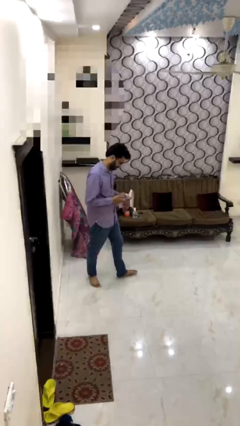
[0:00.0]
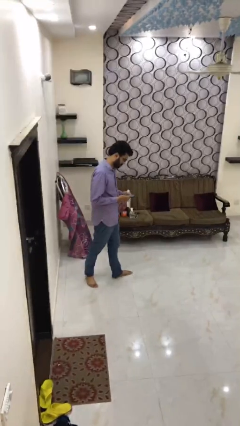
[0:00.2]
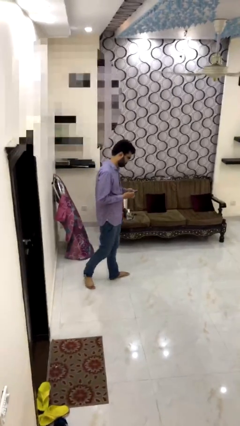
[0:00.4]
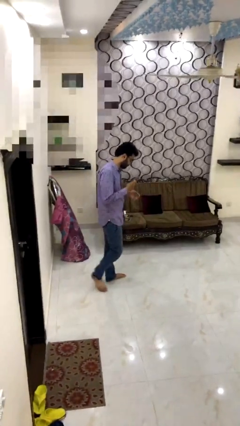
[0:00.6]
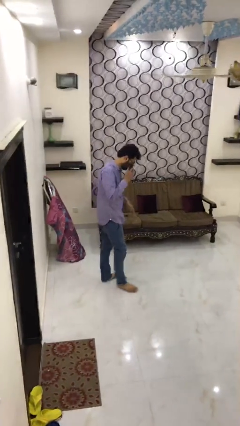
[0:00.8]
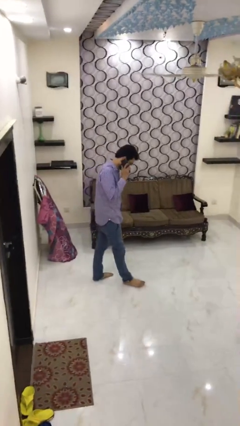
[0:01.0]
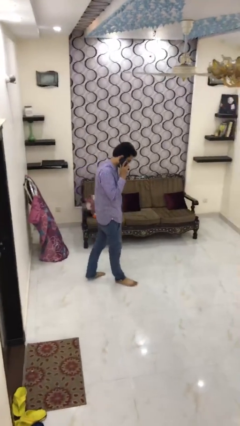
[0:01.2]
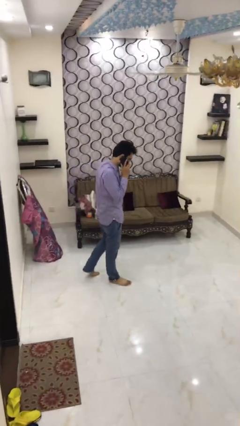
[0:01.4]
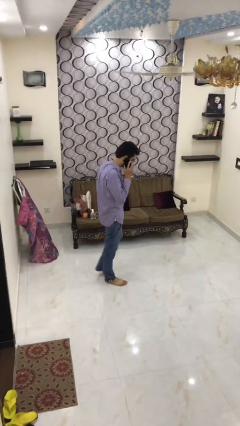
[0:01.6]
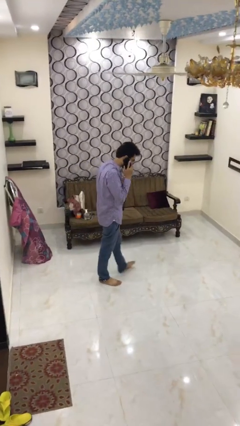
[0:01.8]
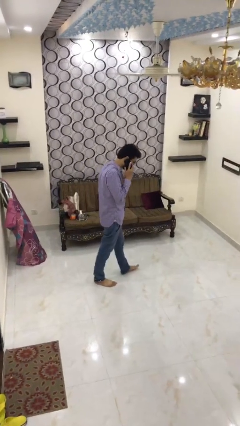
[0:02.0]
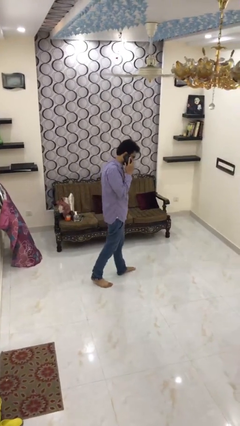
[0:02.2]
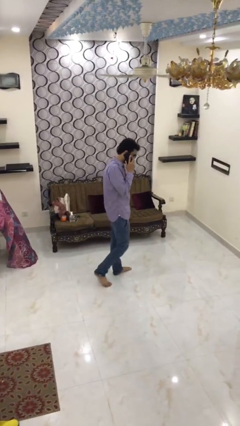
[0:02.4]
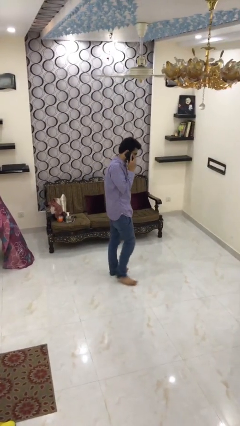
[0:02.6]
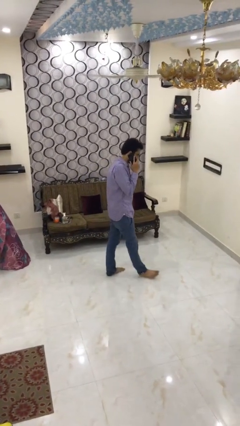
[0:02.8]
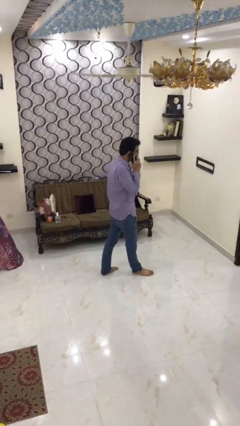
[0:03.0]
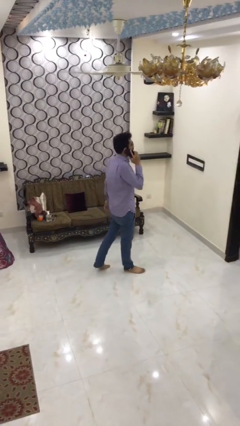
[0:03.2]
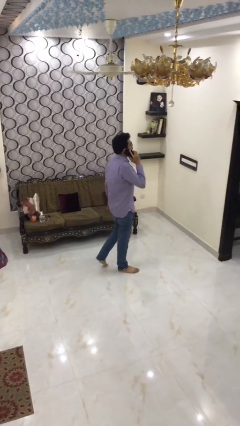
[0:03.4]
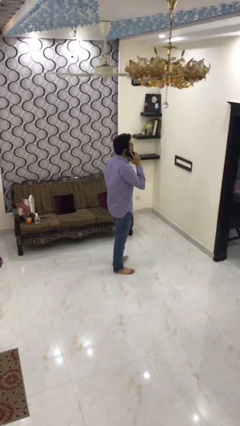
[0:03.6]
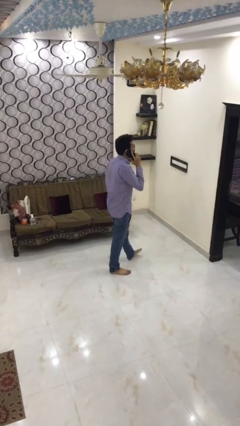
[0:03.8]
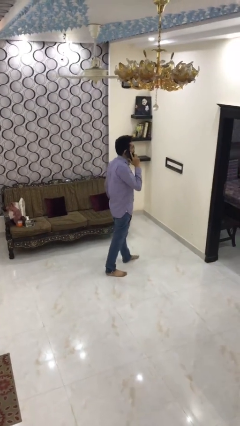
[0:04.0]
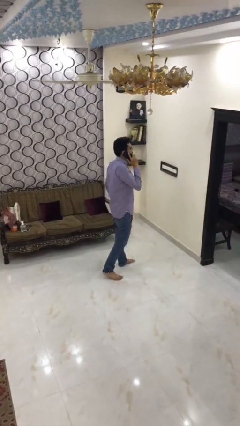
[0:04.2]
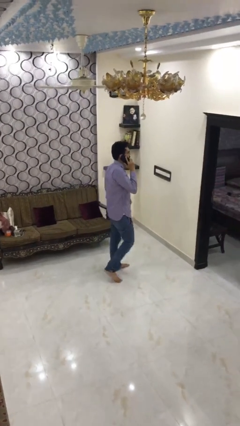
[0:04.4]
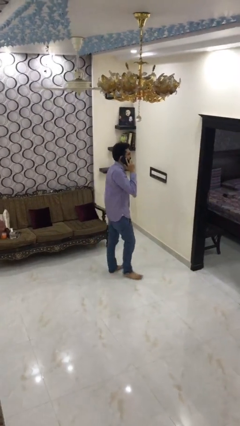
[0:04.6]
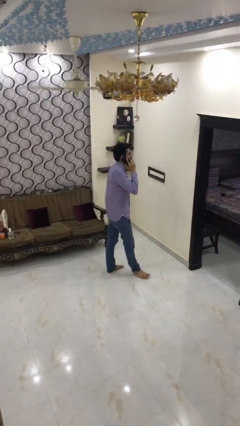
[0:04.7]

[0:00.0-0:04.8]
person talks on phone

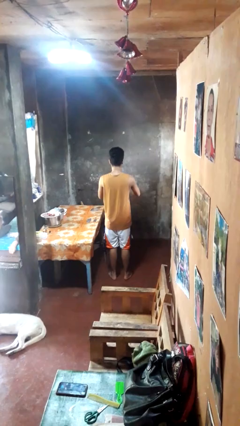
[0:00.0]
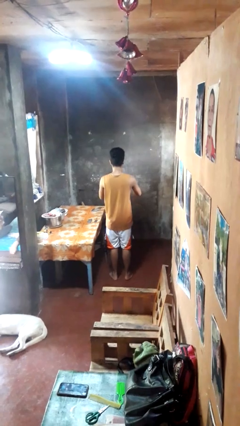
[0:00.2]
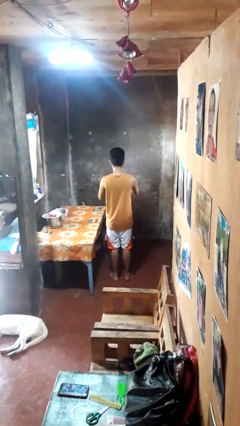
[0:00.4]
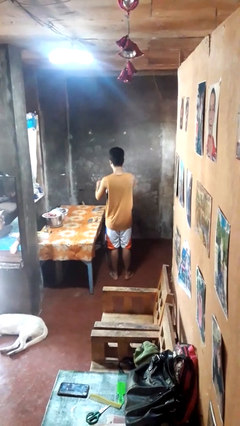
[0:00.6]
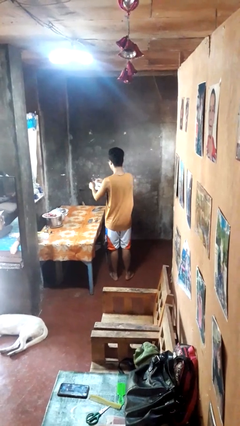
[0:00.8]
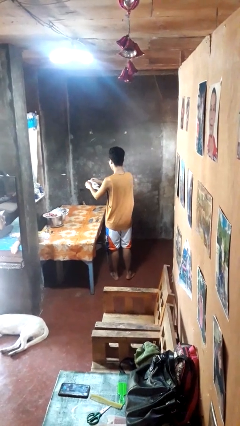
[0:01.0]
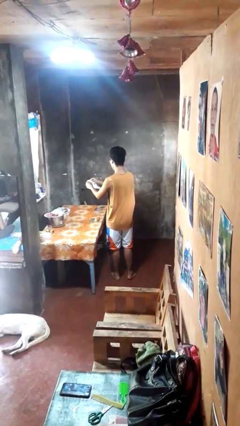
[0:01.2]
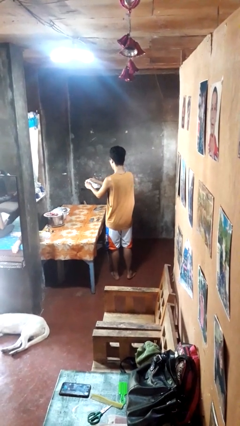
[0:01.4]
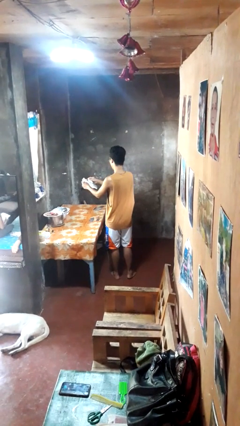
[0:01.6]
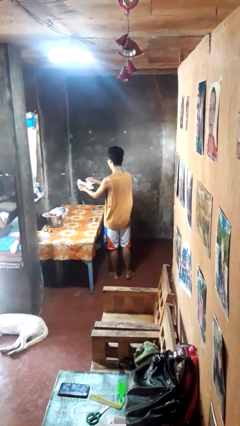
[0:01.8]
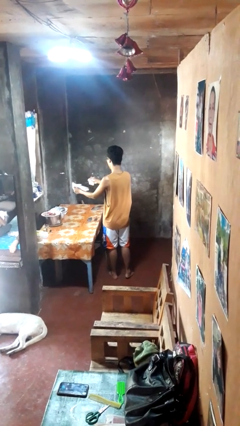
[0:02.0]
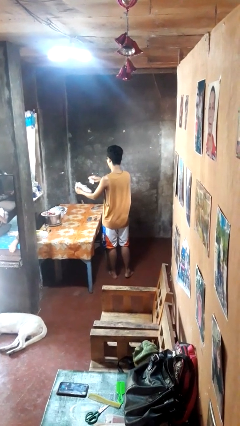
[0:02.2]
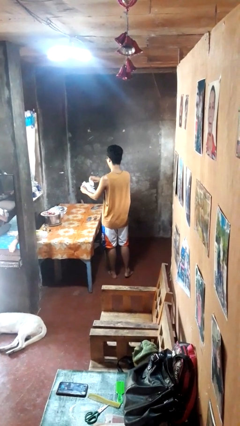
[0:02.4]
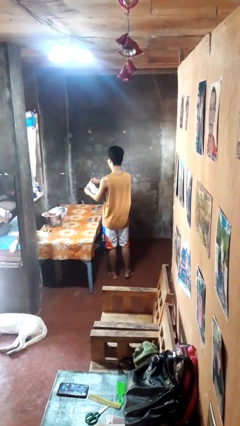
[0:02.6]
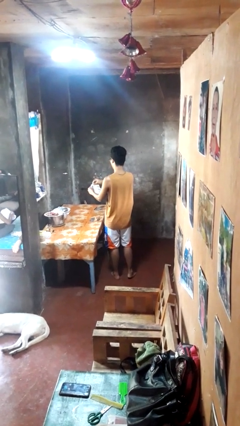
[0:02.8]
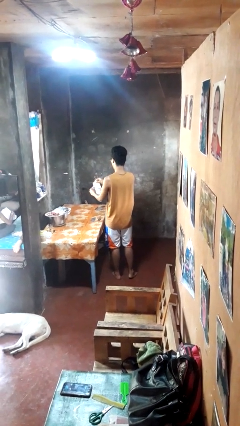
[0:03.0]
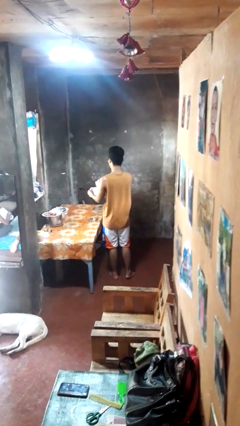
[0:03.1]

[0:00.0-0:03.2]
person tears paper

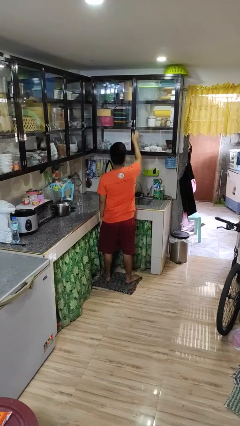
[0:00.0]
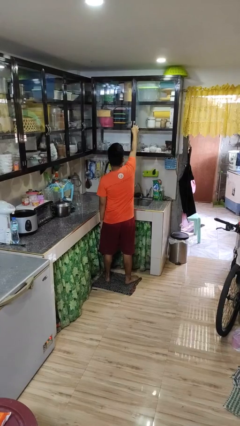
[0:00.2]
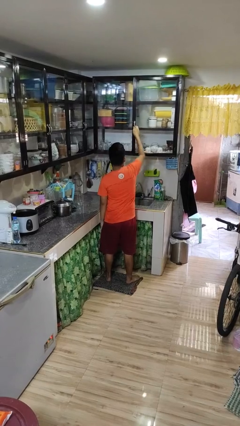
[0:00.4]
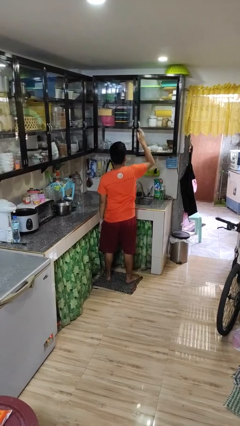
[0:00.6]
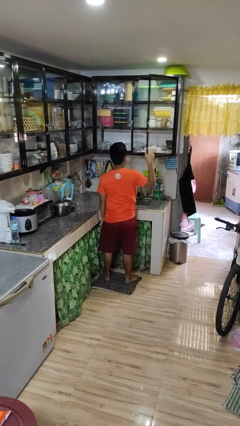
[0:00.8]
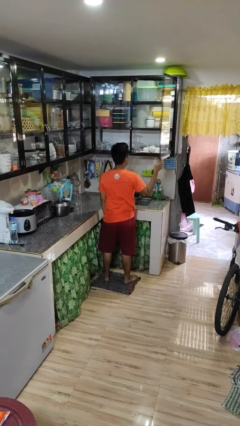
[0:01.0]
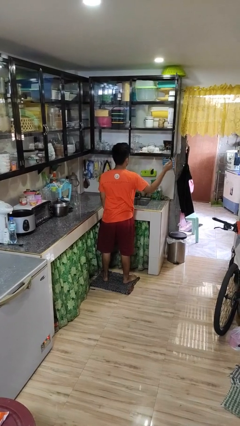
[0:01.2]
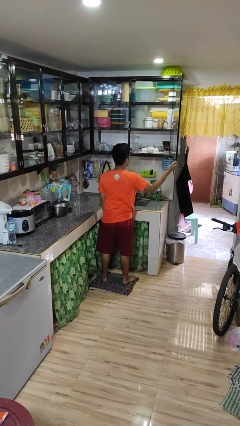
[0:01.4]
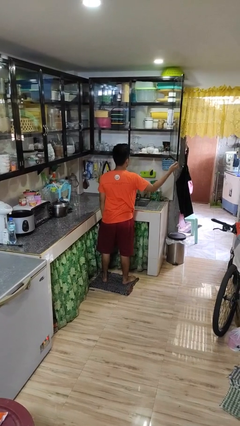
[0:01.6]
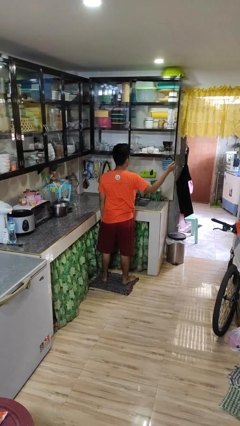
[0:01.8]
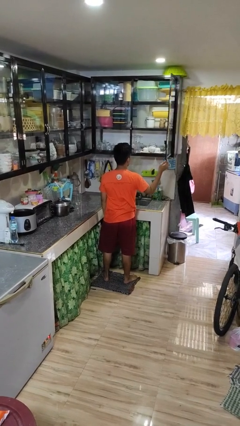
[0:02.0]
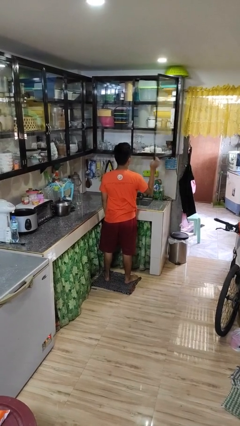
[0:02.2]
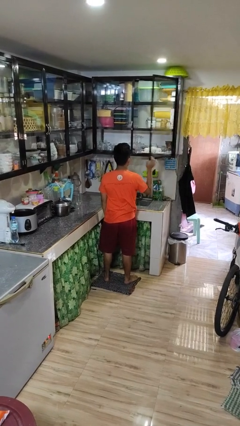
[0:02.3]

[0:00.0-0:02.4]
person opens cabinet

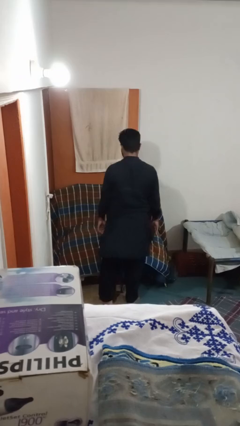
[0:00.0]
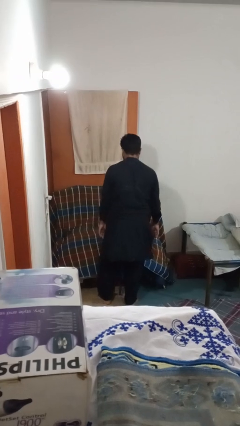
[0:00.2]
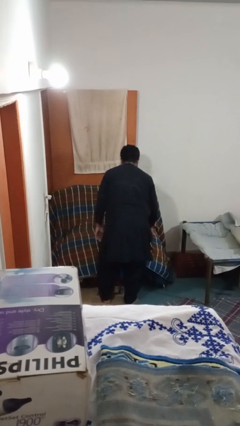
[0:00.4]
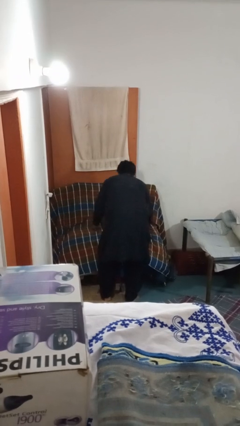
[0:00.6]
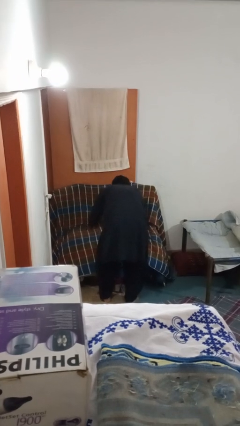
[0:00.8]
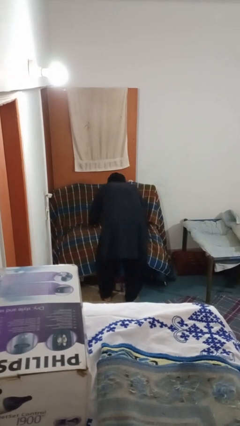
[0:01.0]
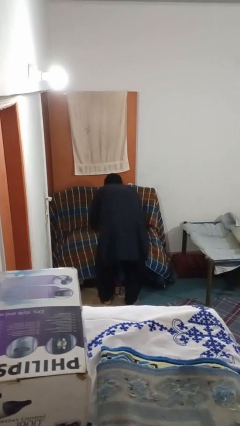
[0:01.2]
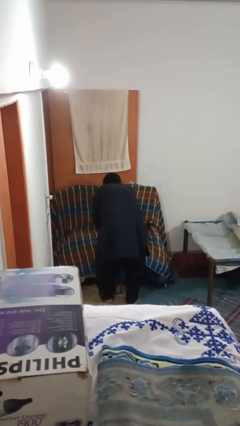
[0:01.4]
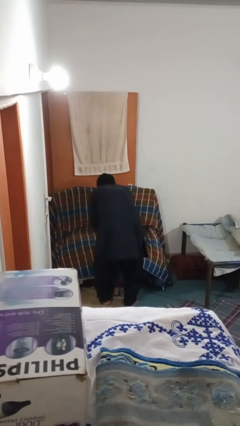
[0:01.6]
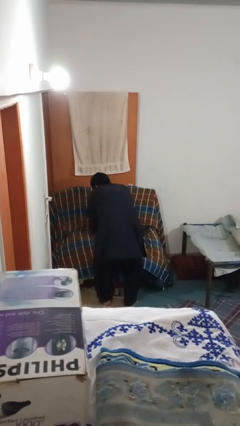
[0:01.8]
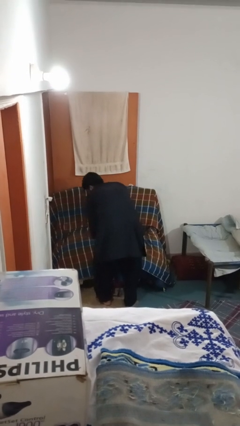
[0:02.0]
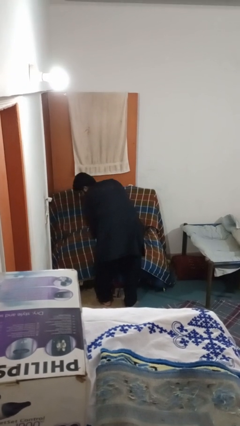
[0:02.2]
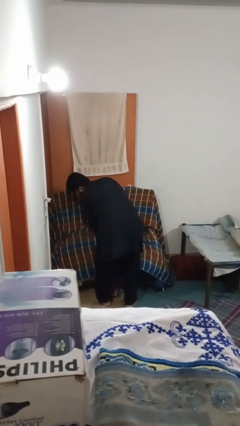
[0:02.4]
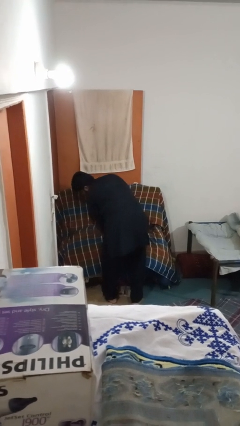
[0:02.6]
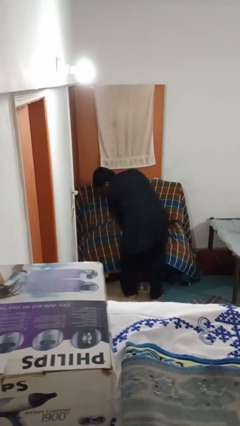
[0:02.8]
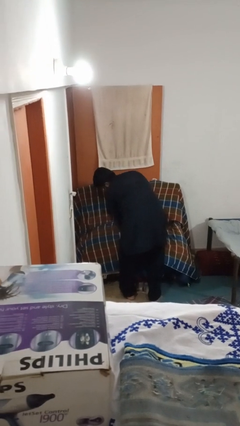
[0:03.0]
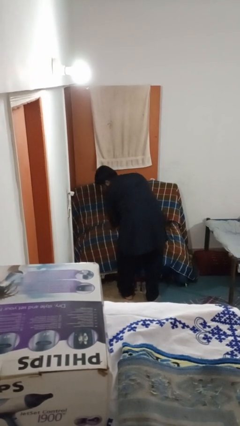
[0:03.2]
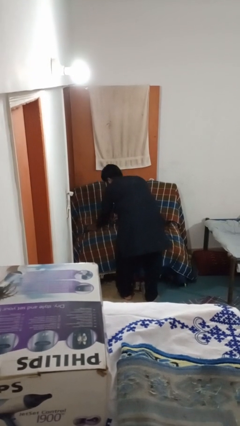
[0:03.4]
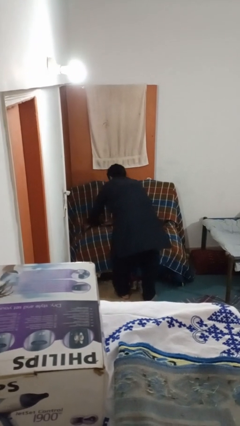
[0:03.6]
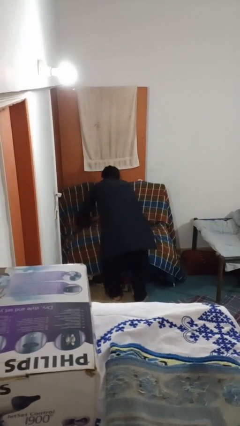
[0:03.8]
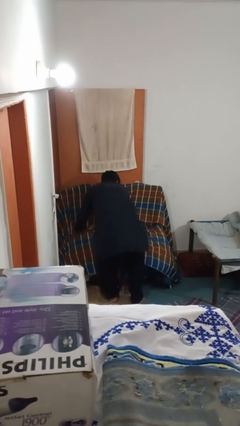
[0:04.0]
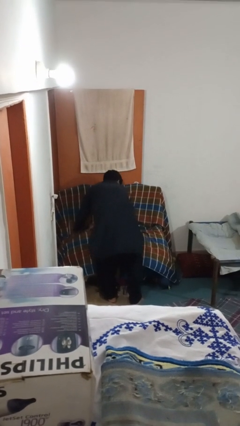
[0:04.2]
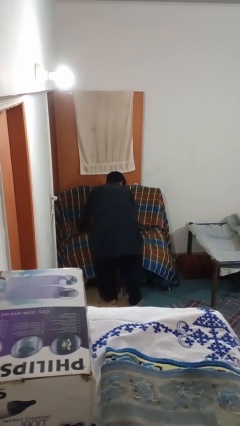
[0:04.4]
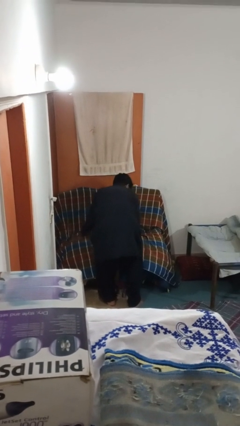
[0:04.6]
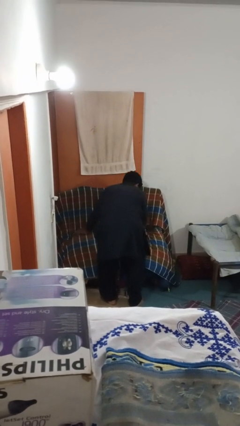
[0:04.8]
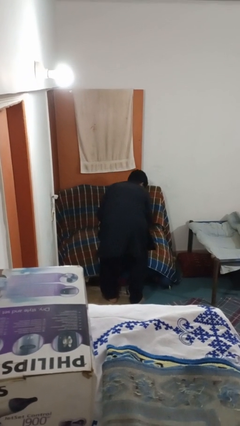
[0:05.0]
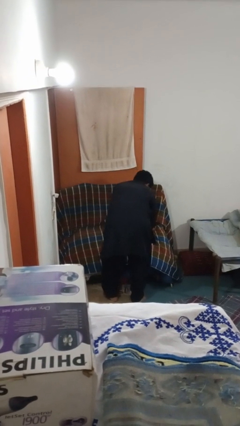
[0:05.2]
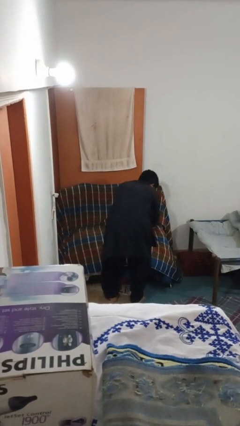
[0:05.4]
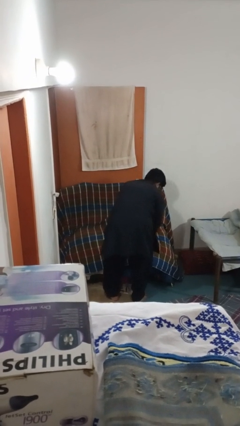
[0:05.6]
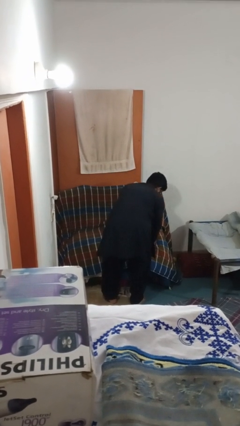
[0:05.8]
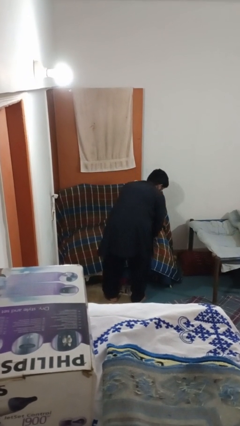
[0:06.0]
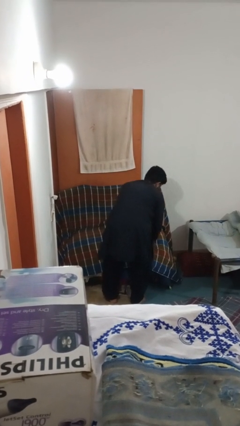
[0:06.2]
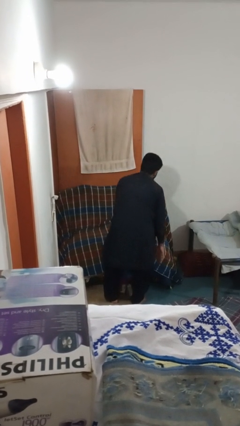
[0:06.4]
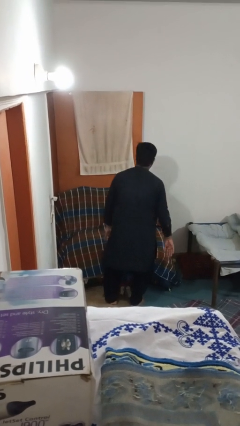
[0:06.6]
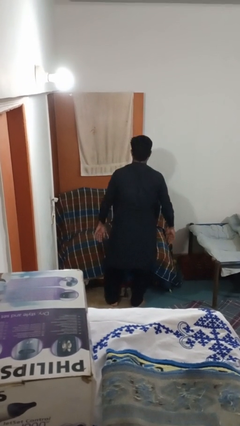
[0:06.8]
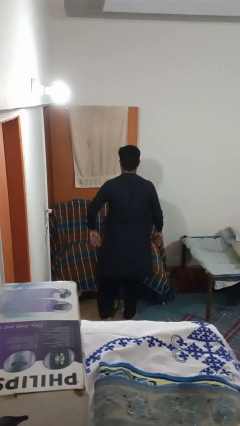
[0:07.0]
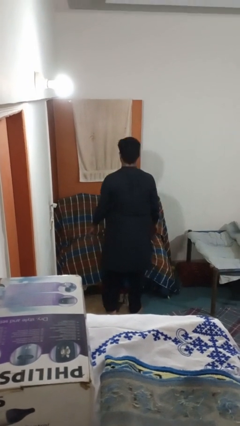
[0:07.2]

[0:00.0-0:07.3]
person searches in couch
